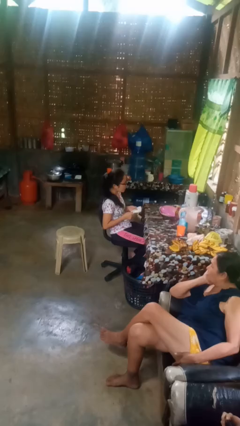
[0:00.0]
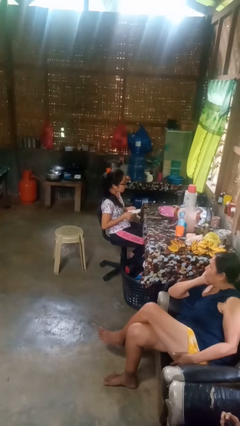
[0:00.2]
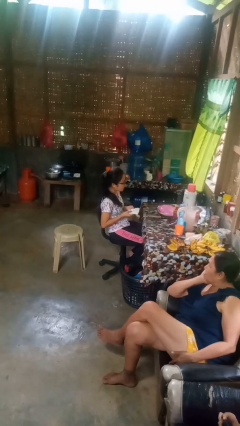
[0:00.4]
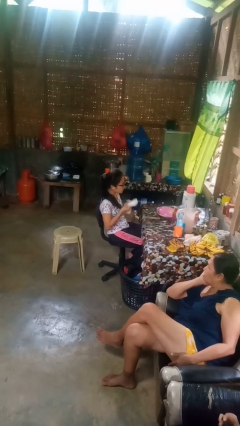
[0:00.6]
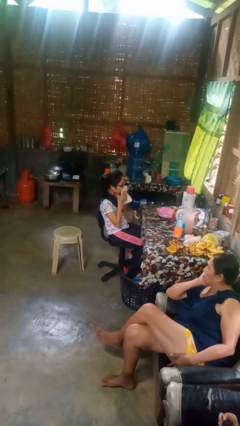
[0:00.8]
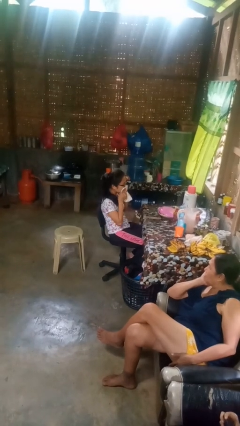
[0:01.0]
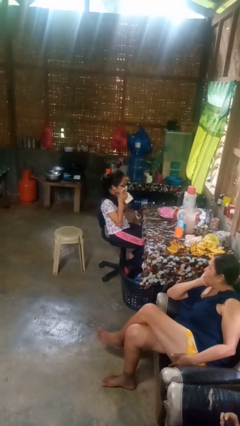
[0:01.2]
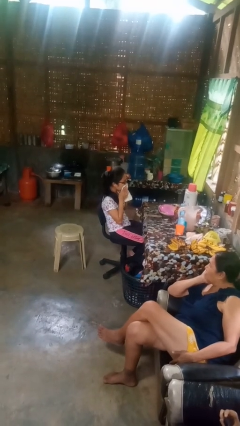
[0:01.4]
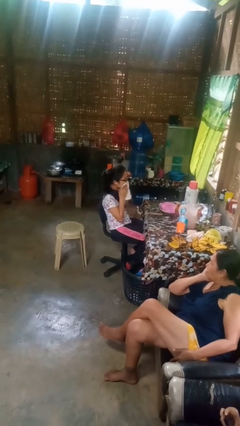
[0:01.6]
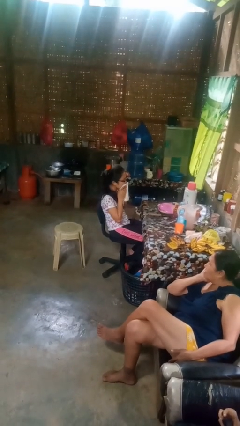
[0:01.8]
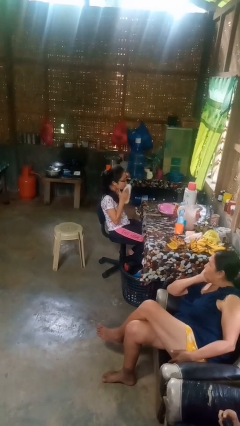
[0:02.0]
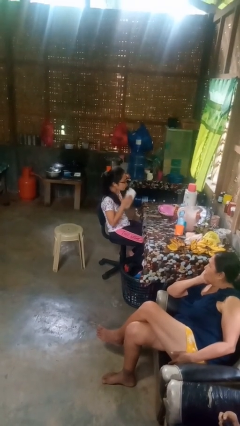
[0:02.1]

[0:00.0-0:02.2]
person wipes mouth with napkin

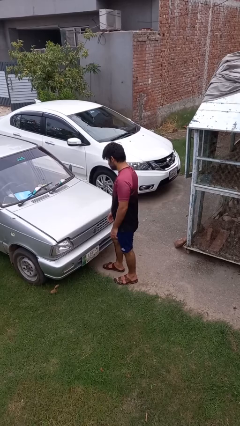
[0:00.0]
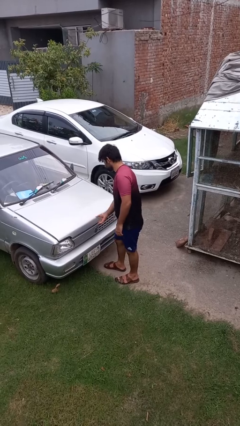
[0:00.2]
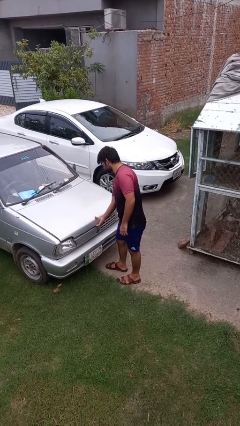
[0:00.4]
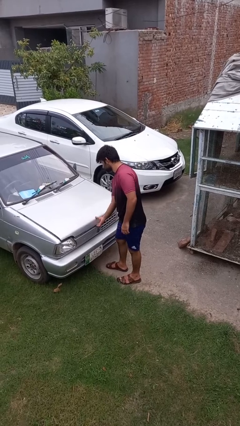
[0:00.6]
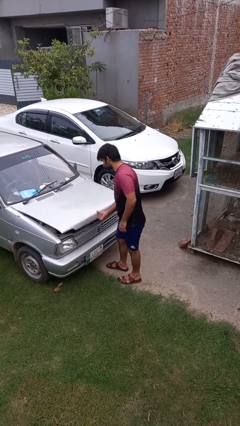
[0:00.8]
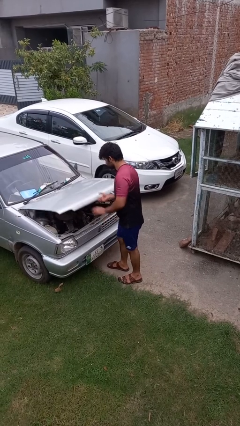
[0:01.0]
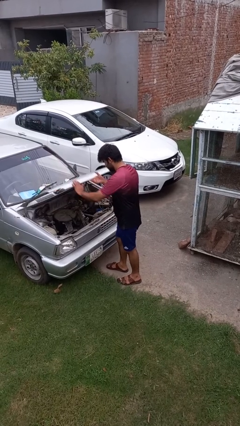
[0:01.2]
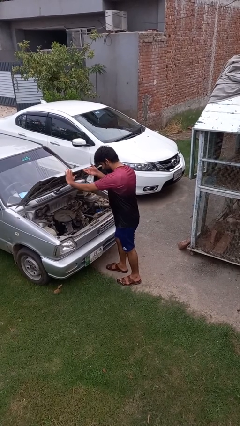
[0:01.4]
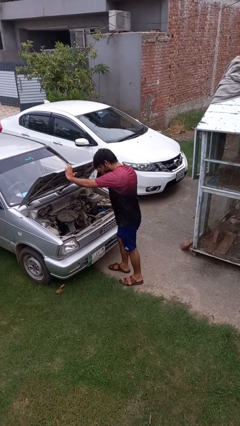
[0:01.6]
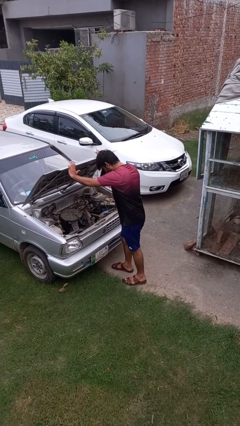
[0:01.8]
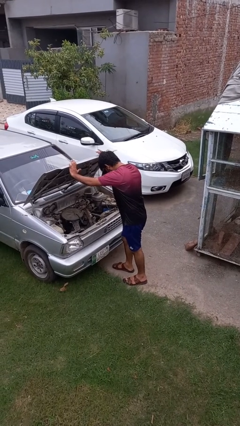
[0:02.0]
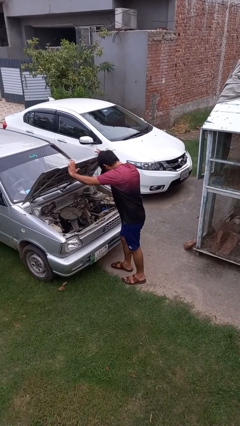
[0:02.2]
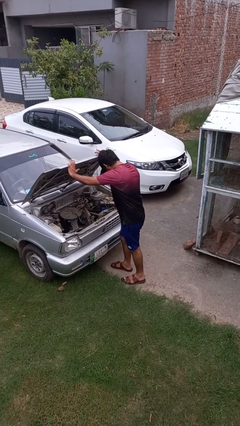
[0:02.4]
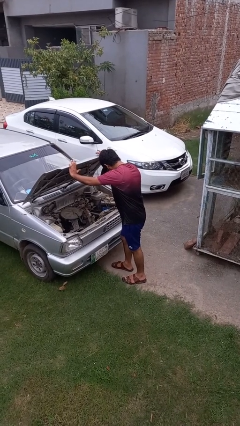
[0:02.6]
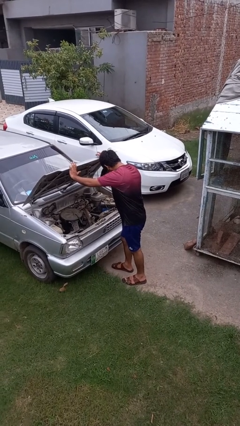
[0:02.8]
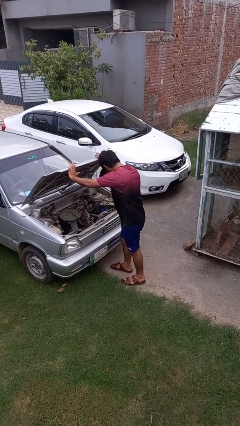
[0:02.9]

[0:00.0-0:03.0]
person opens car hood

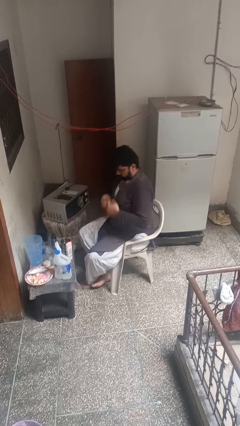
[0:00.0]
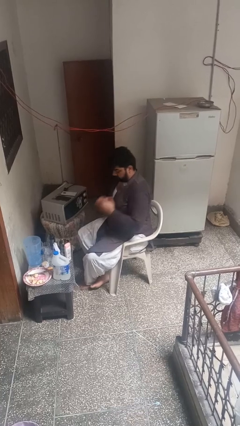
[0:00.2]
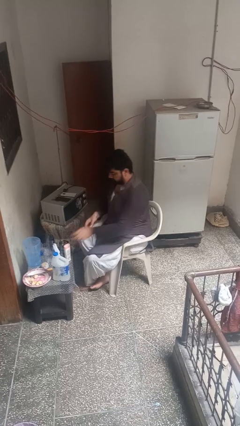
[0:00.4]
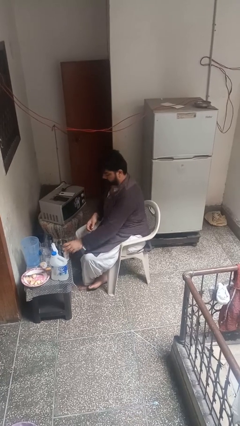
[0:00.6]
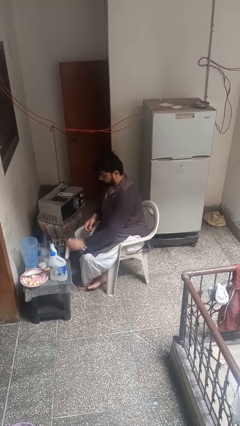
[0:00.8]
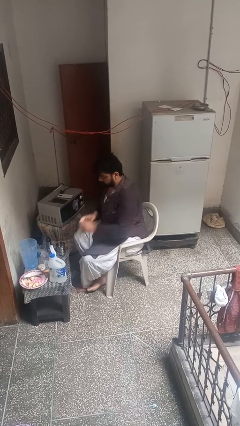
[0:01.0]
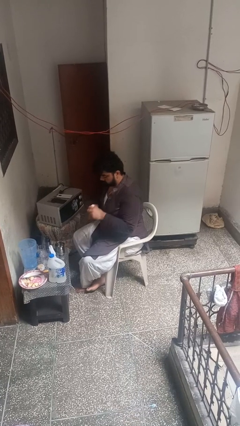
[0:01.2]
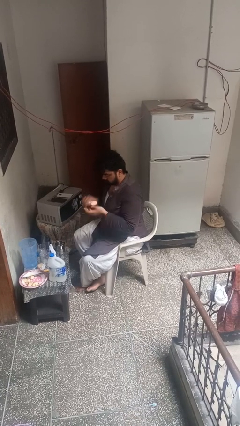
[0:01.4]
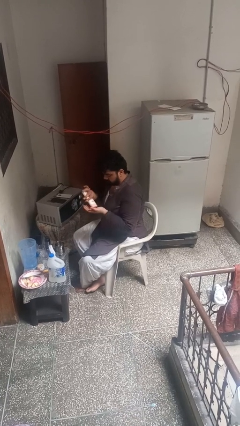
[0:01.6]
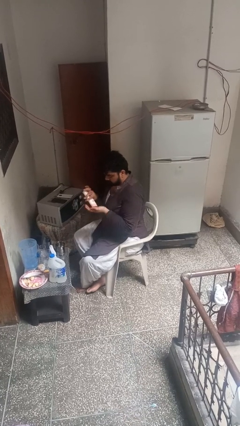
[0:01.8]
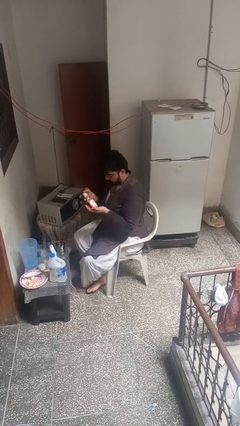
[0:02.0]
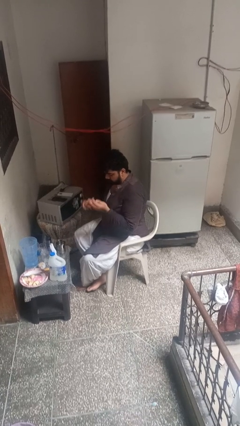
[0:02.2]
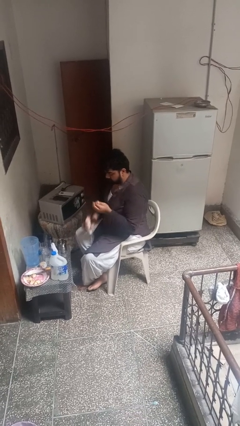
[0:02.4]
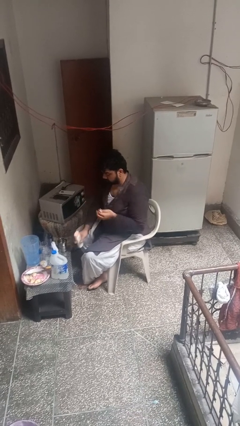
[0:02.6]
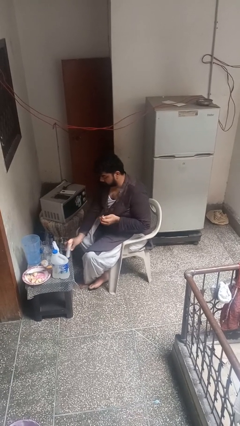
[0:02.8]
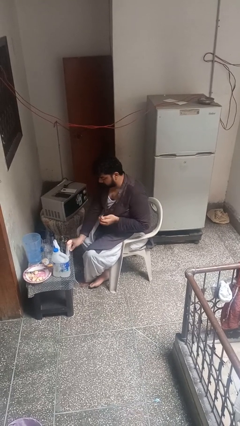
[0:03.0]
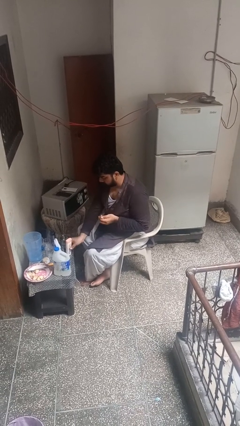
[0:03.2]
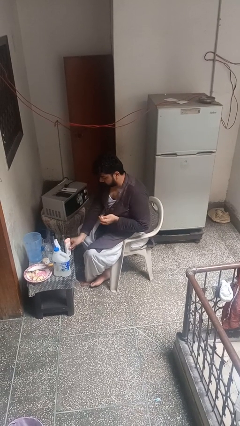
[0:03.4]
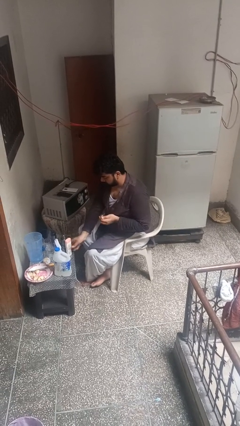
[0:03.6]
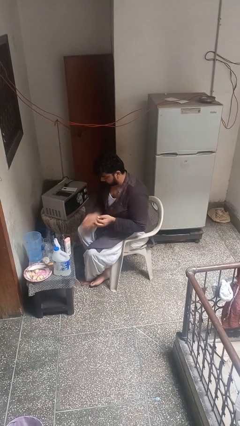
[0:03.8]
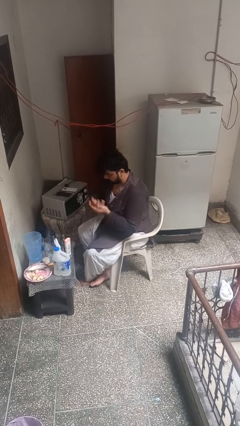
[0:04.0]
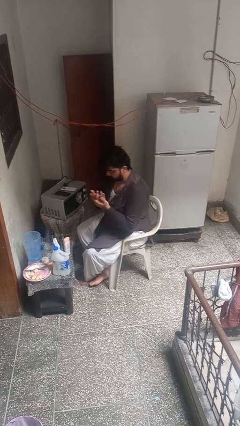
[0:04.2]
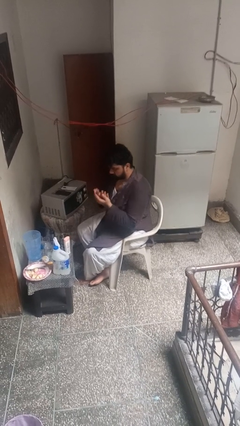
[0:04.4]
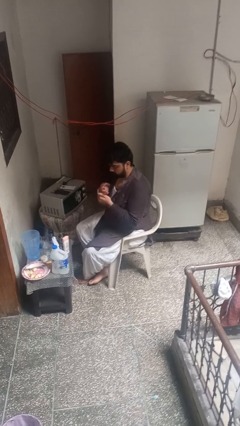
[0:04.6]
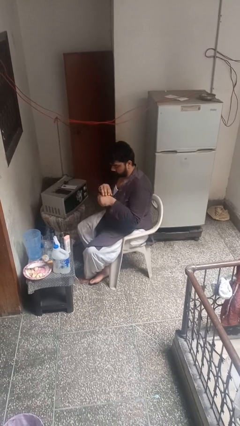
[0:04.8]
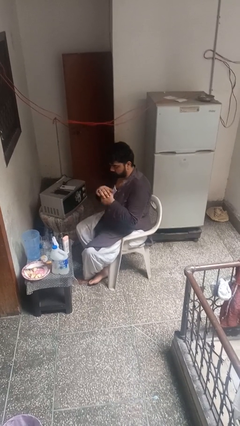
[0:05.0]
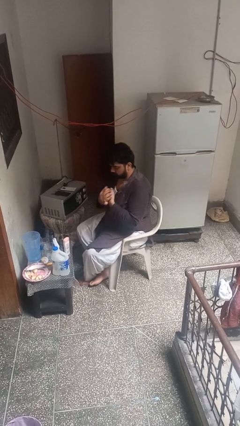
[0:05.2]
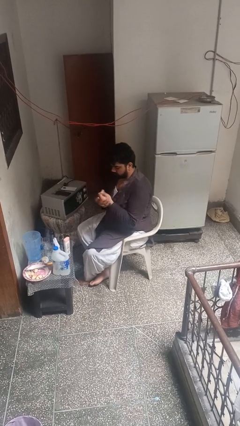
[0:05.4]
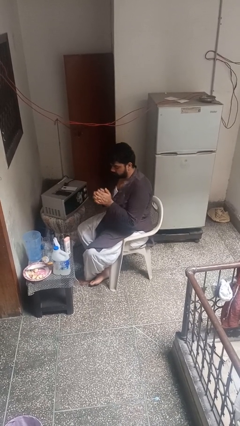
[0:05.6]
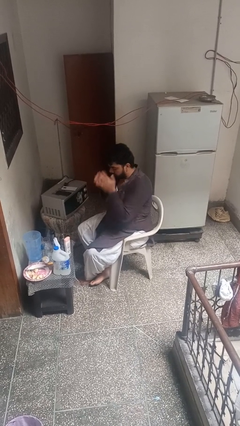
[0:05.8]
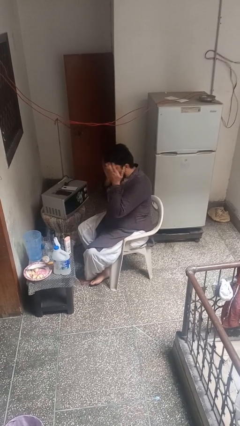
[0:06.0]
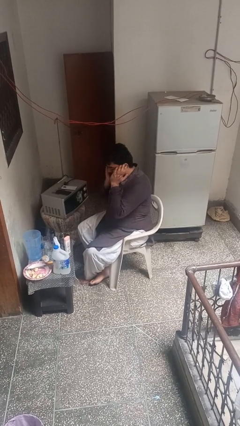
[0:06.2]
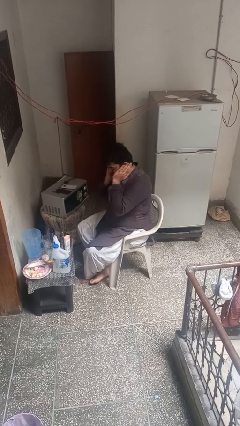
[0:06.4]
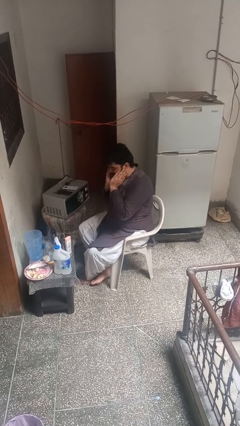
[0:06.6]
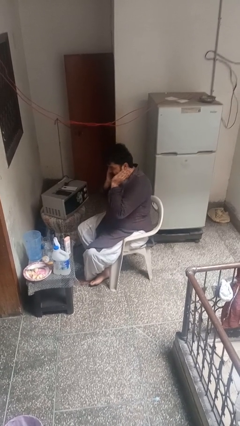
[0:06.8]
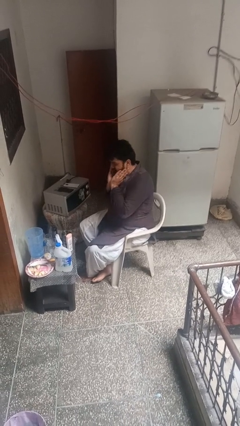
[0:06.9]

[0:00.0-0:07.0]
person applies facial moisturizer

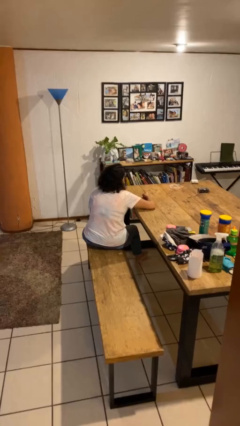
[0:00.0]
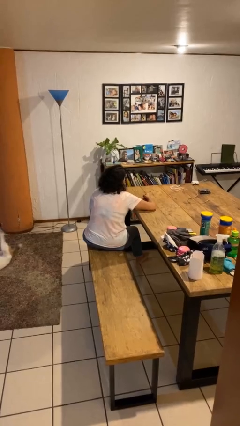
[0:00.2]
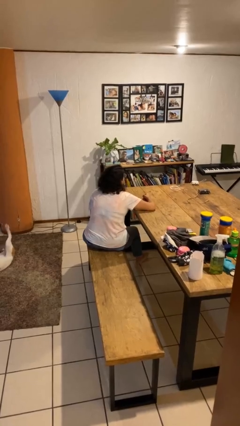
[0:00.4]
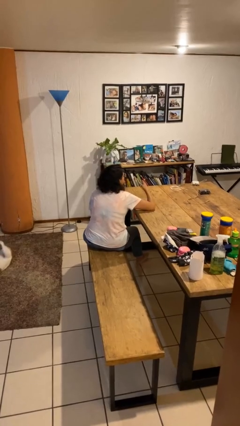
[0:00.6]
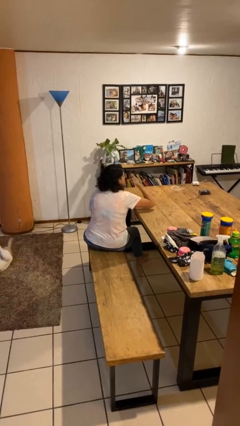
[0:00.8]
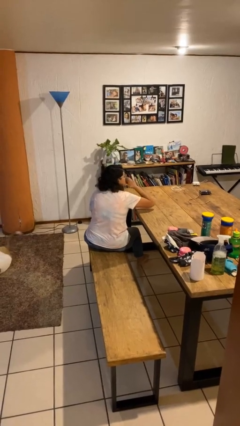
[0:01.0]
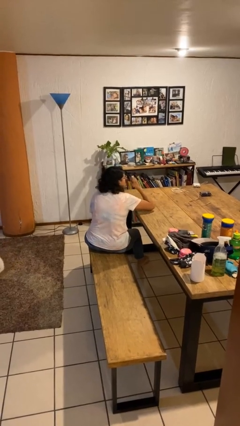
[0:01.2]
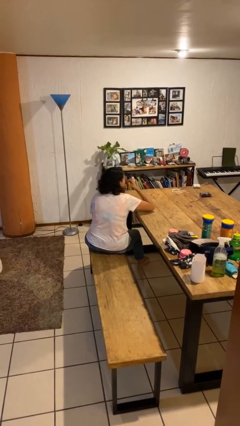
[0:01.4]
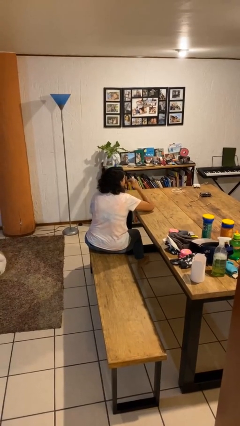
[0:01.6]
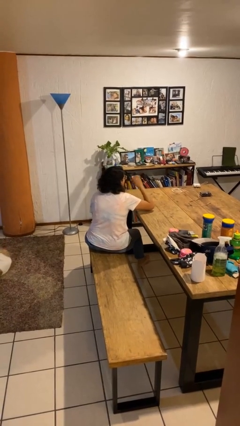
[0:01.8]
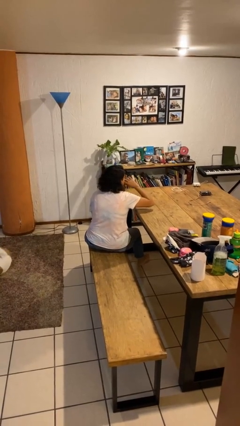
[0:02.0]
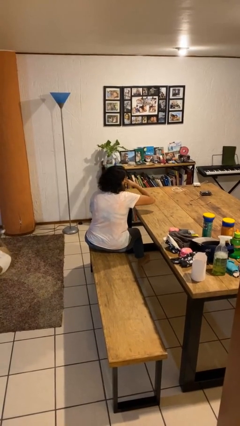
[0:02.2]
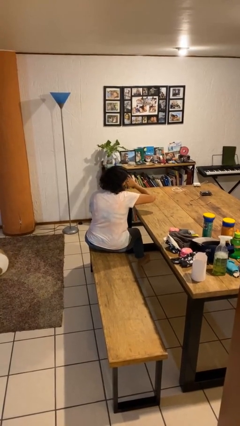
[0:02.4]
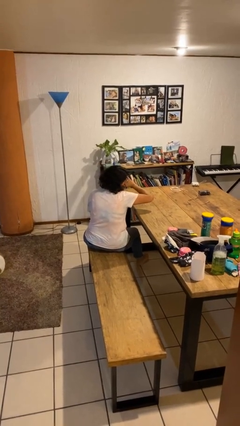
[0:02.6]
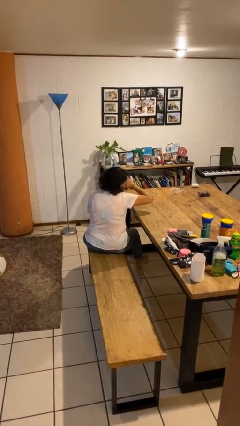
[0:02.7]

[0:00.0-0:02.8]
person licks fingers

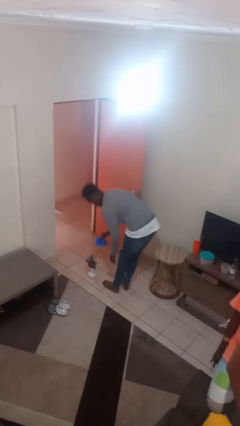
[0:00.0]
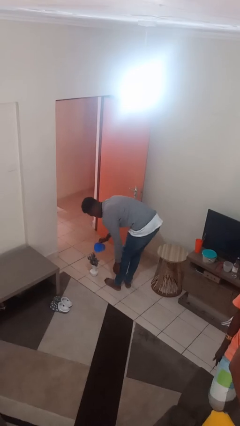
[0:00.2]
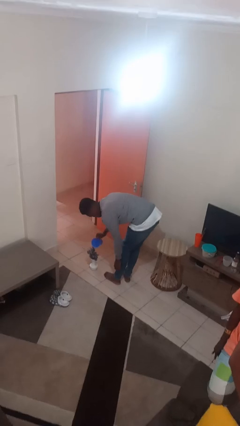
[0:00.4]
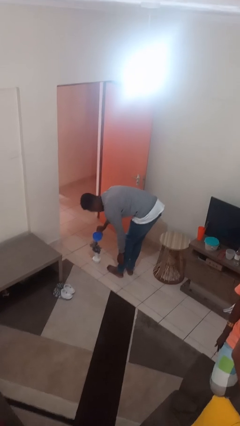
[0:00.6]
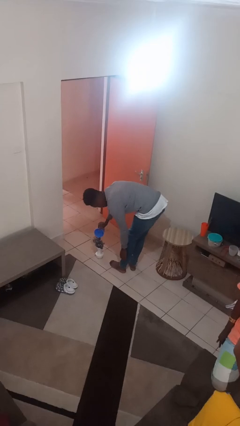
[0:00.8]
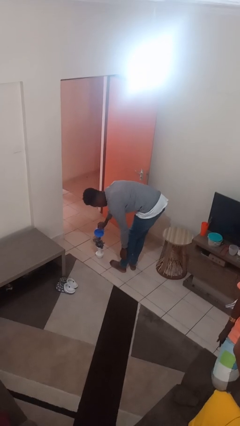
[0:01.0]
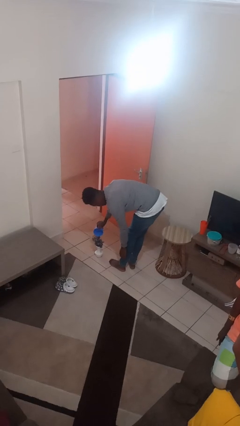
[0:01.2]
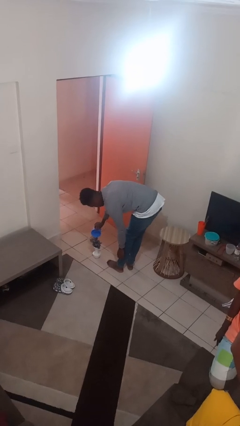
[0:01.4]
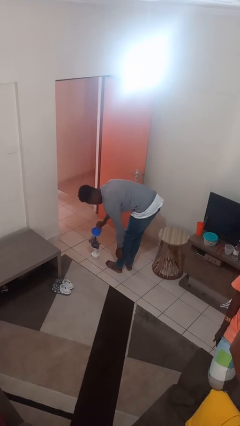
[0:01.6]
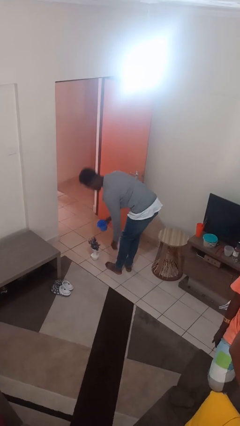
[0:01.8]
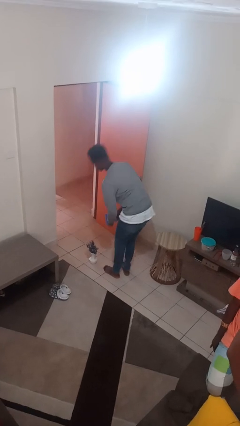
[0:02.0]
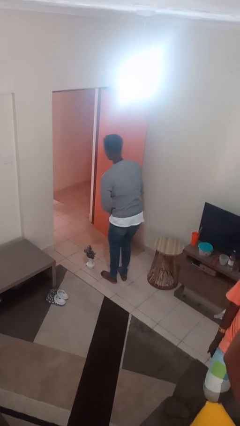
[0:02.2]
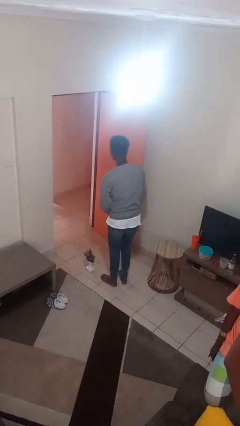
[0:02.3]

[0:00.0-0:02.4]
person waters houseplant

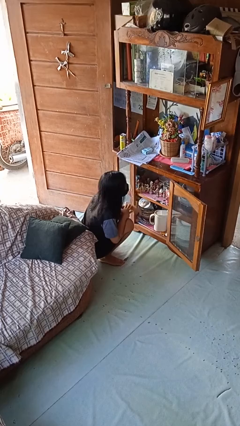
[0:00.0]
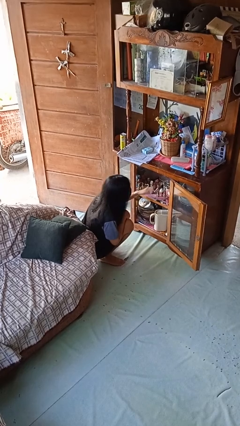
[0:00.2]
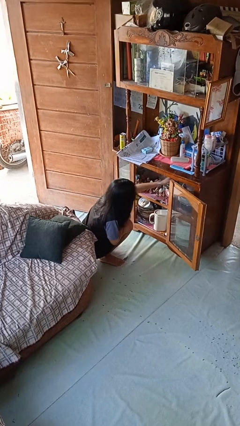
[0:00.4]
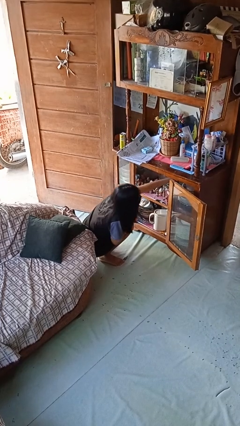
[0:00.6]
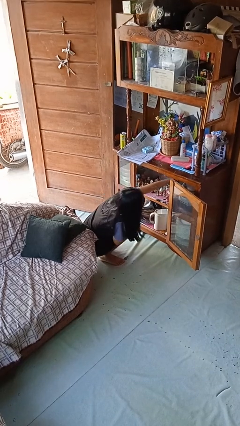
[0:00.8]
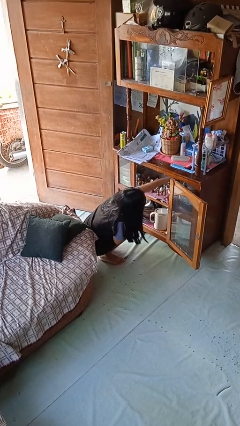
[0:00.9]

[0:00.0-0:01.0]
person searches in cabinet
